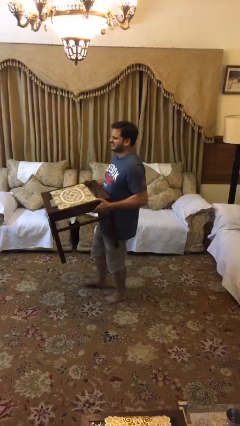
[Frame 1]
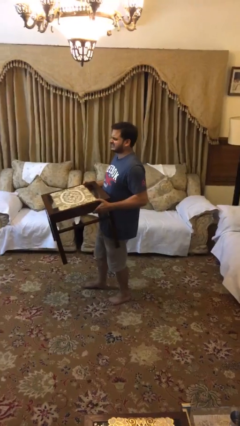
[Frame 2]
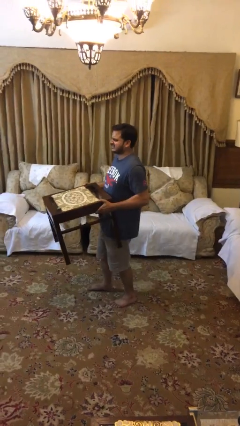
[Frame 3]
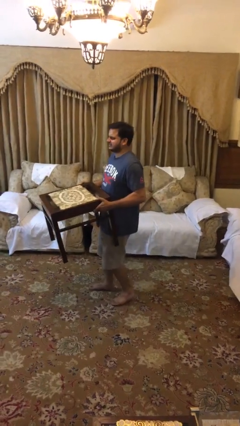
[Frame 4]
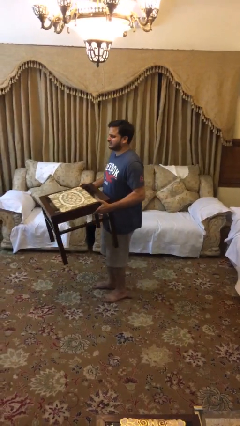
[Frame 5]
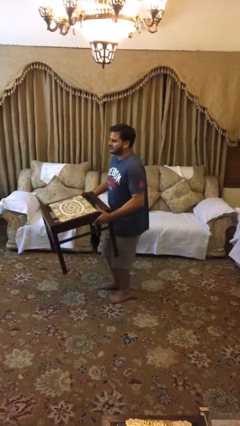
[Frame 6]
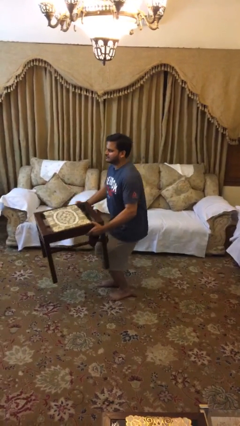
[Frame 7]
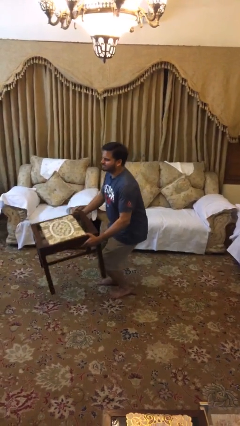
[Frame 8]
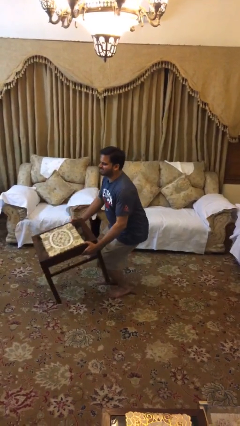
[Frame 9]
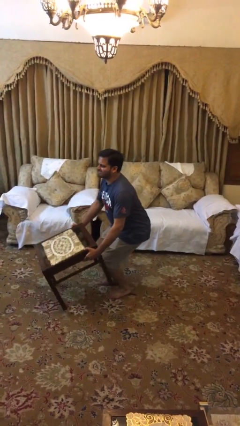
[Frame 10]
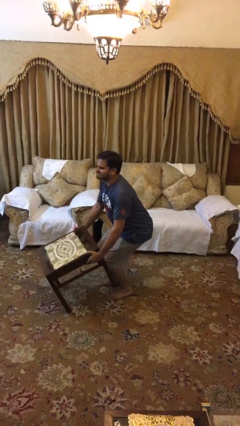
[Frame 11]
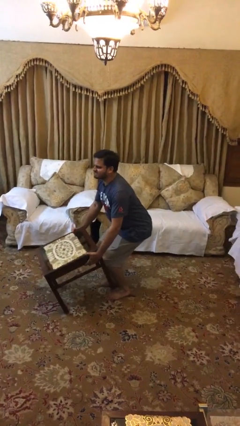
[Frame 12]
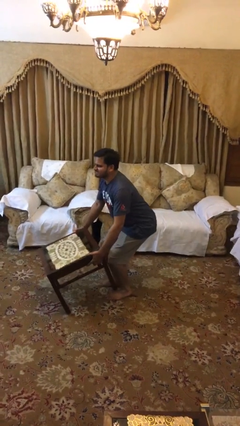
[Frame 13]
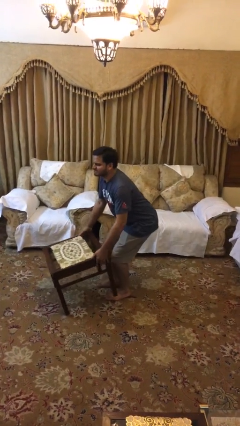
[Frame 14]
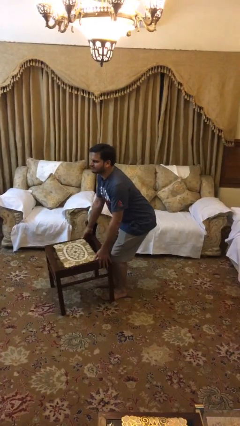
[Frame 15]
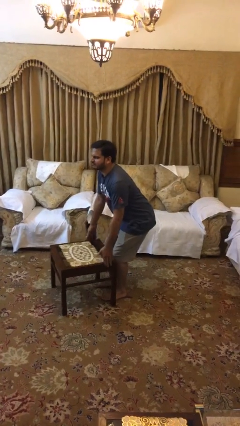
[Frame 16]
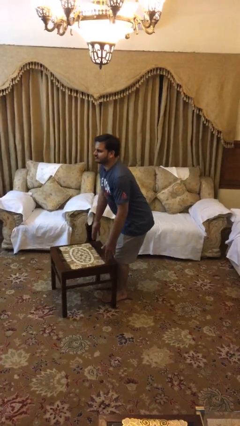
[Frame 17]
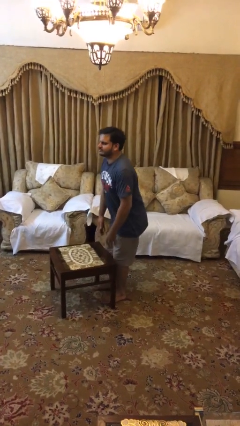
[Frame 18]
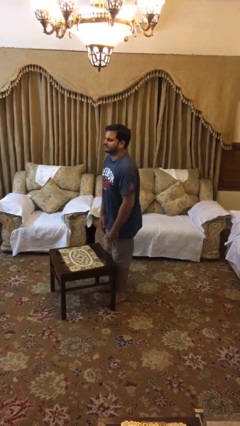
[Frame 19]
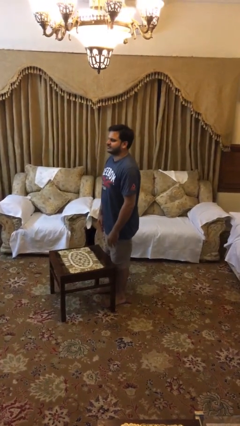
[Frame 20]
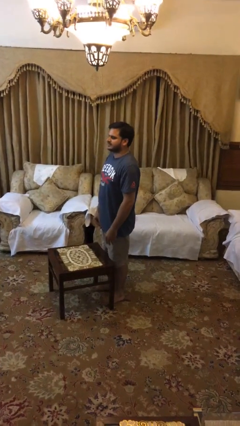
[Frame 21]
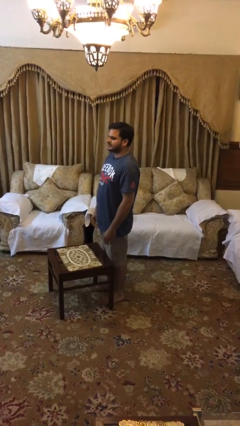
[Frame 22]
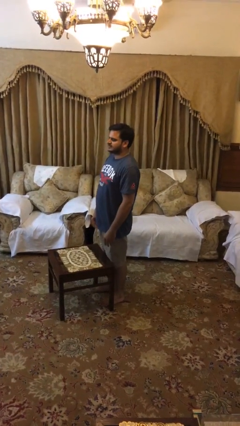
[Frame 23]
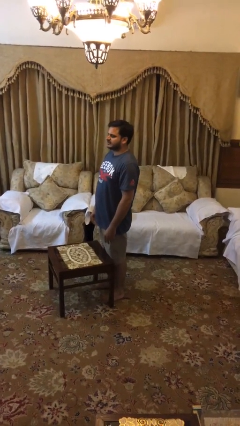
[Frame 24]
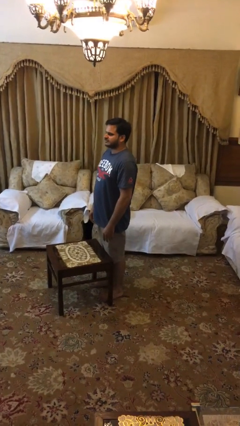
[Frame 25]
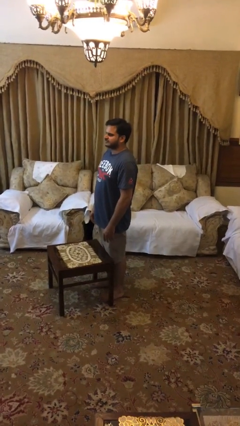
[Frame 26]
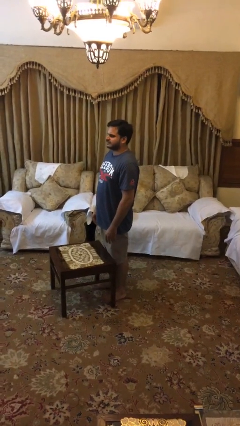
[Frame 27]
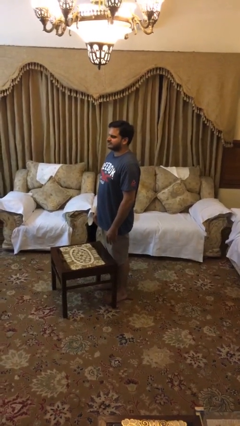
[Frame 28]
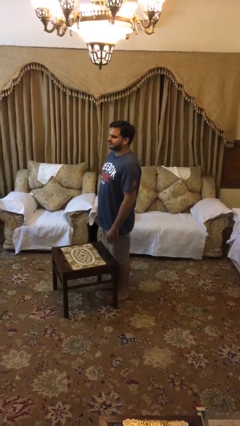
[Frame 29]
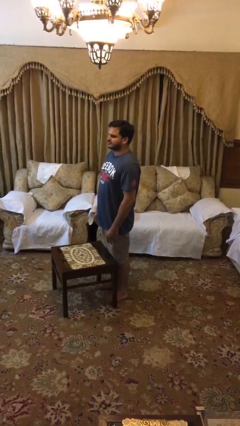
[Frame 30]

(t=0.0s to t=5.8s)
person puts down object on floor

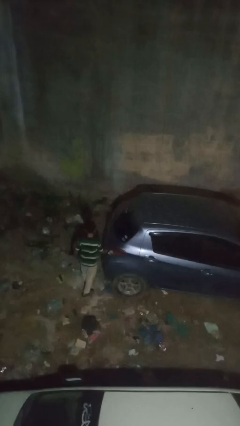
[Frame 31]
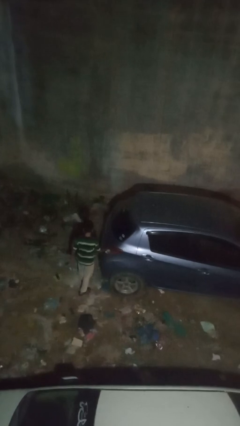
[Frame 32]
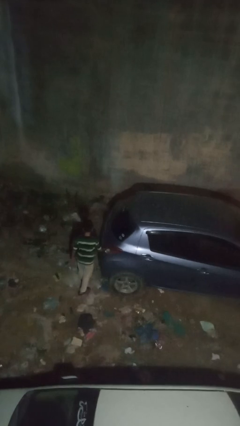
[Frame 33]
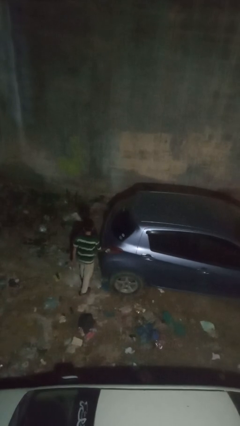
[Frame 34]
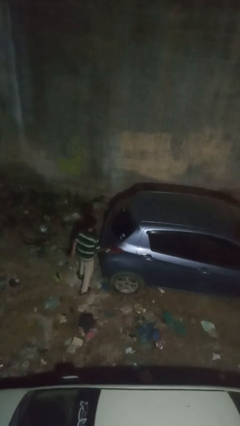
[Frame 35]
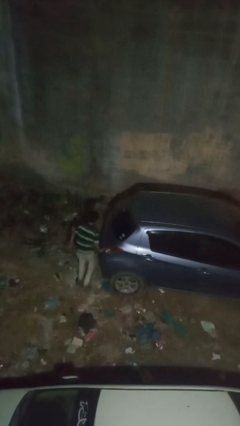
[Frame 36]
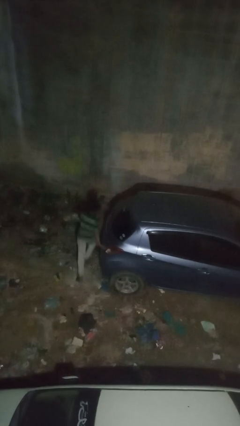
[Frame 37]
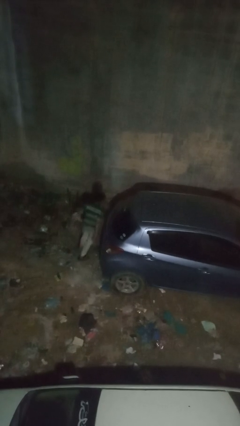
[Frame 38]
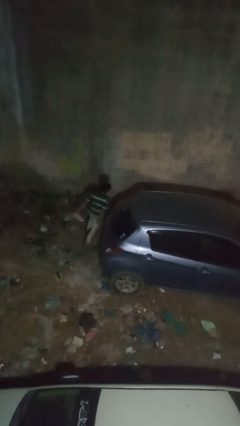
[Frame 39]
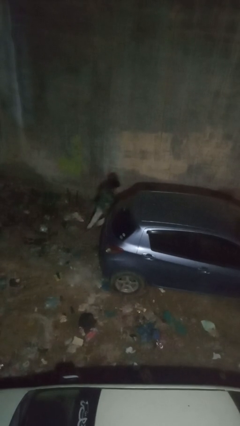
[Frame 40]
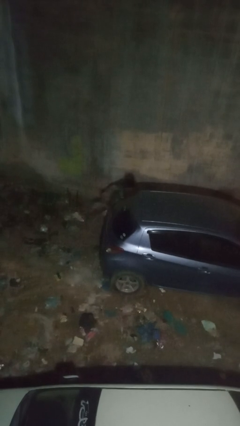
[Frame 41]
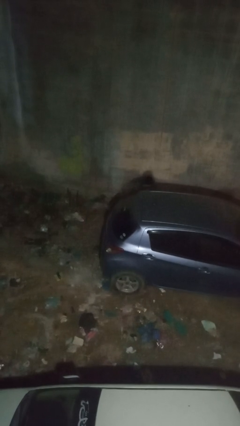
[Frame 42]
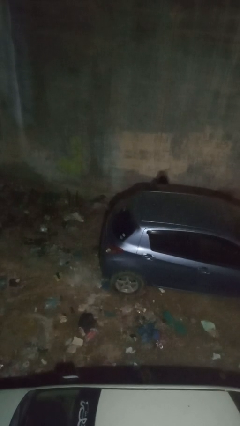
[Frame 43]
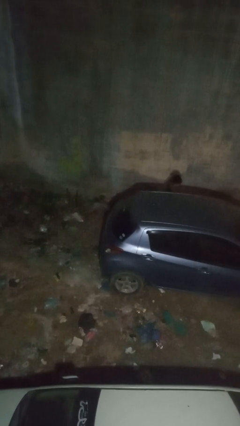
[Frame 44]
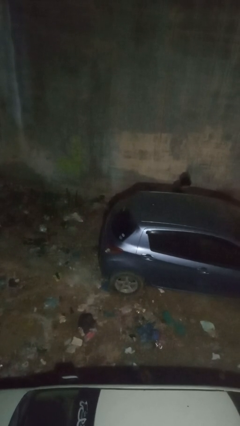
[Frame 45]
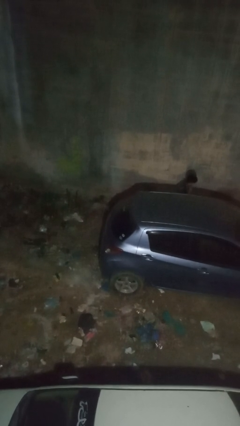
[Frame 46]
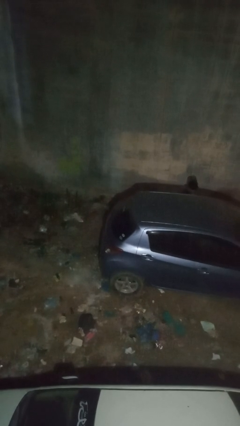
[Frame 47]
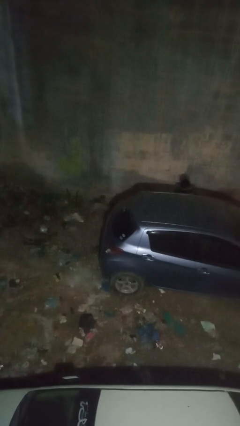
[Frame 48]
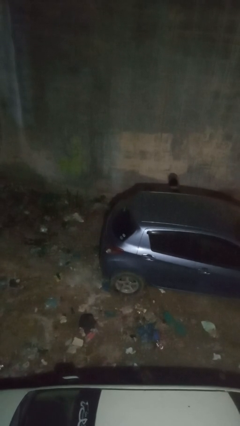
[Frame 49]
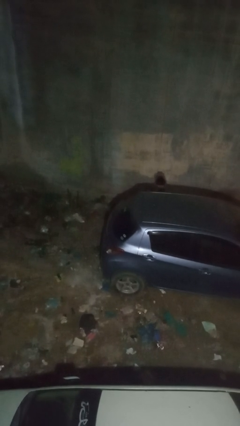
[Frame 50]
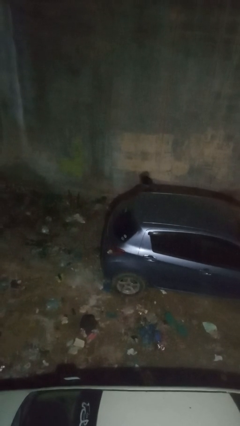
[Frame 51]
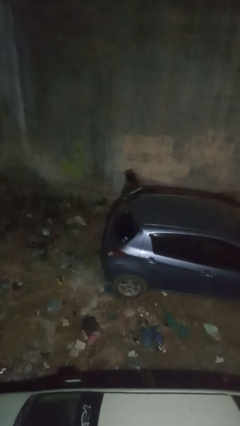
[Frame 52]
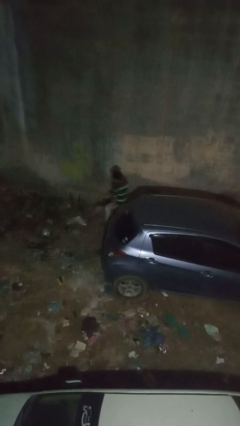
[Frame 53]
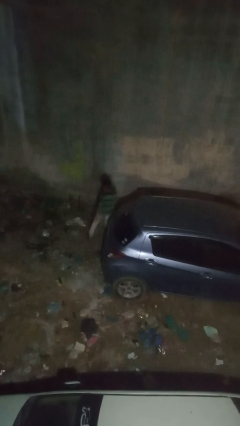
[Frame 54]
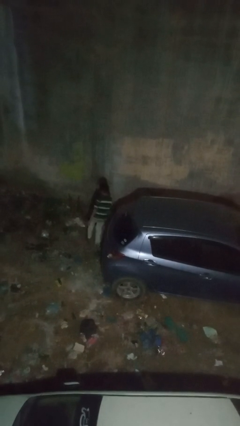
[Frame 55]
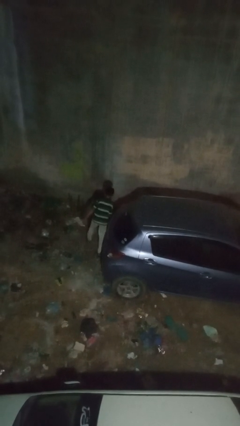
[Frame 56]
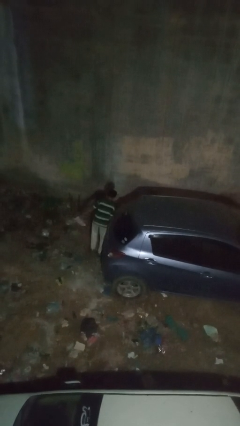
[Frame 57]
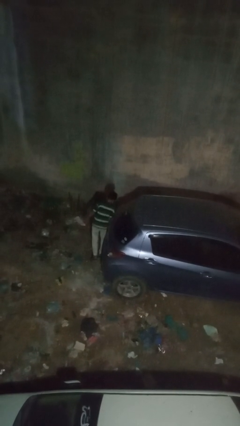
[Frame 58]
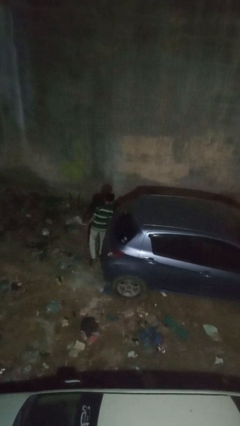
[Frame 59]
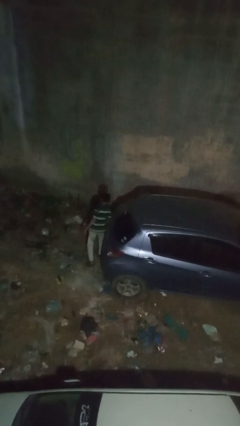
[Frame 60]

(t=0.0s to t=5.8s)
person walks around car

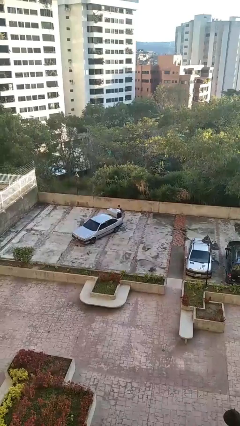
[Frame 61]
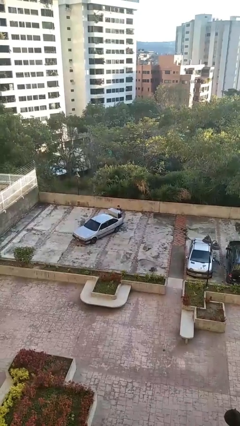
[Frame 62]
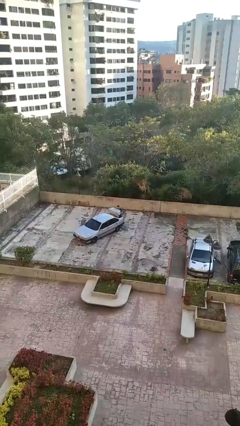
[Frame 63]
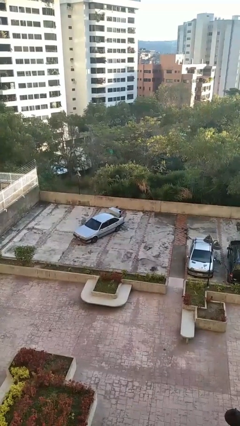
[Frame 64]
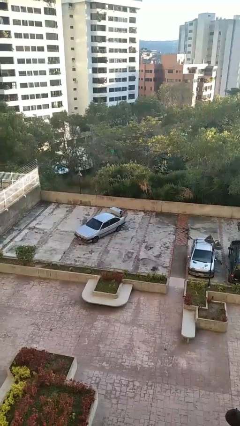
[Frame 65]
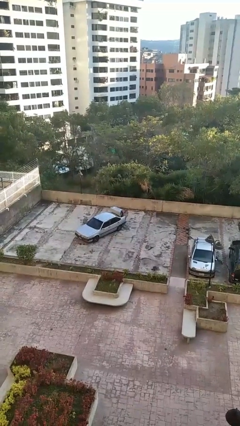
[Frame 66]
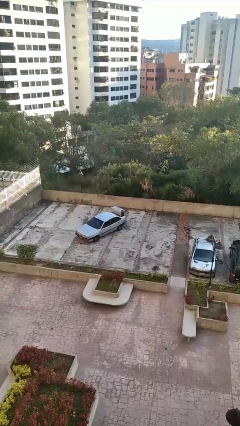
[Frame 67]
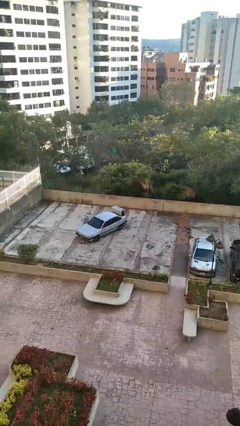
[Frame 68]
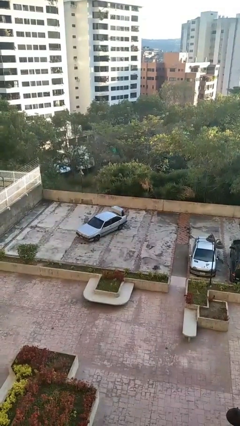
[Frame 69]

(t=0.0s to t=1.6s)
person loads car

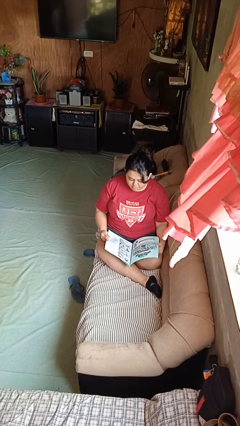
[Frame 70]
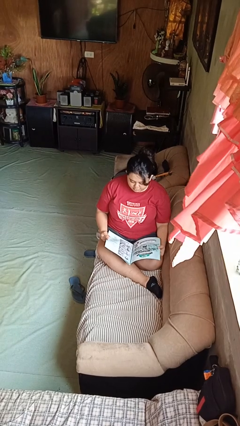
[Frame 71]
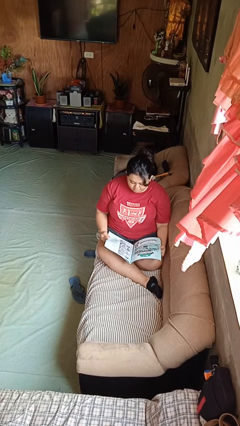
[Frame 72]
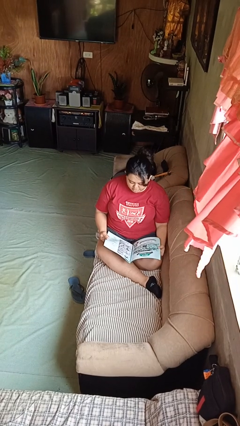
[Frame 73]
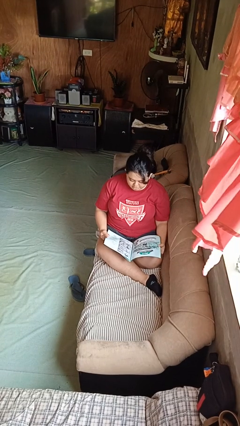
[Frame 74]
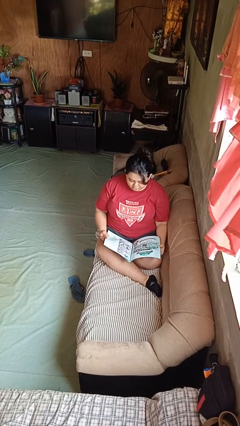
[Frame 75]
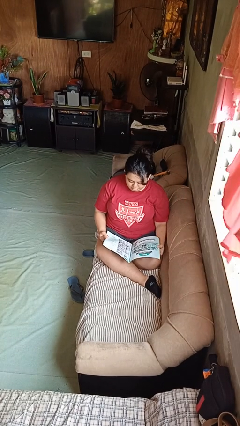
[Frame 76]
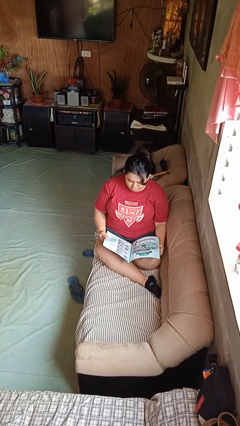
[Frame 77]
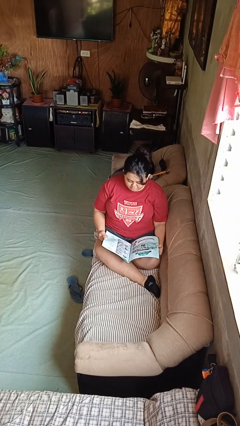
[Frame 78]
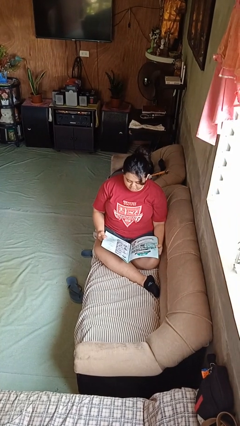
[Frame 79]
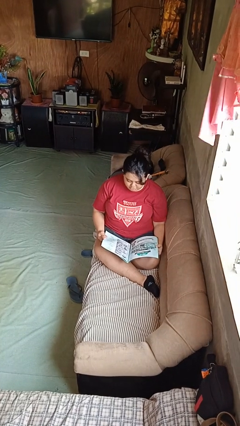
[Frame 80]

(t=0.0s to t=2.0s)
person reads magazine

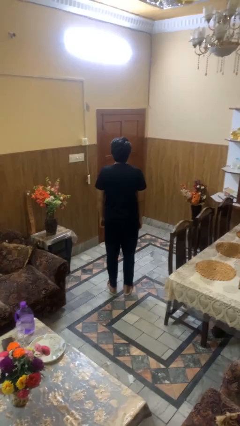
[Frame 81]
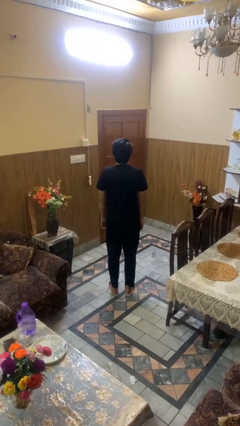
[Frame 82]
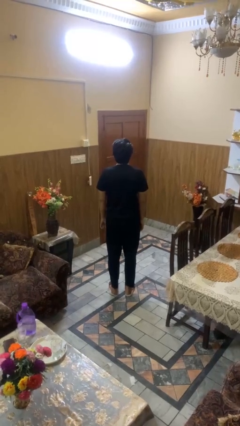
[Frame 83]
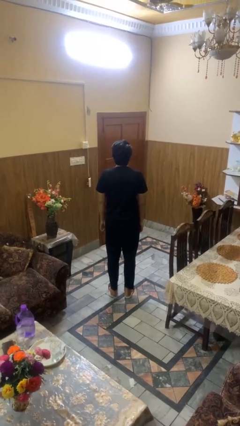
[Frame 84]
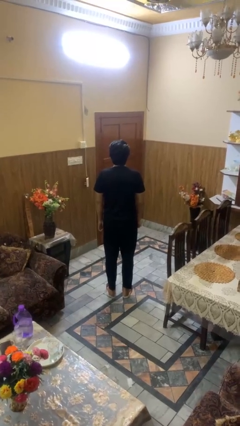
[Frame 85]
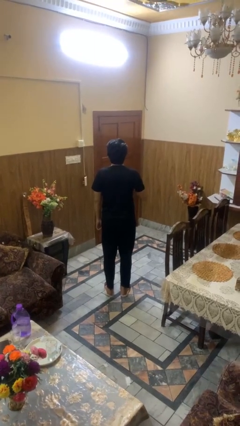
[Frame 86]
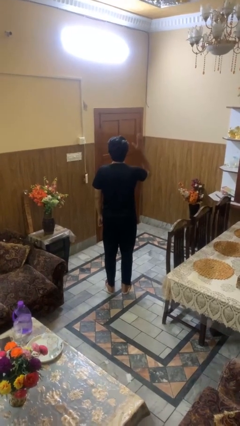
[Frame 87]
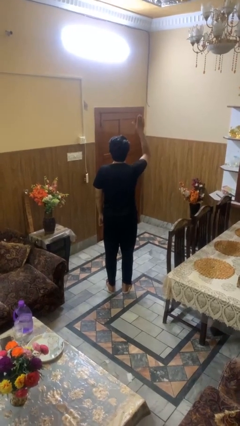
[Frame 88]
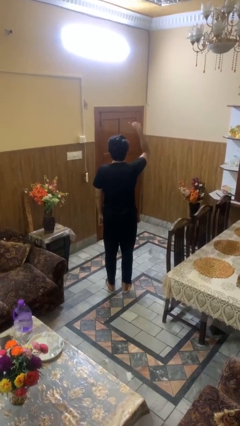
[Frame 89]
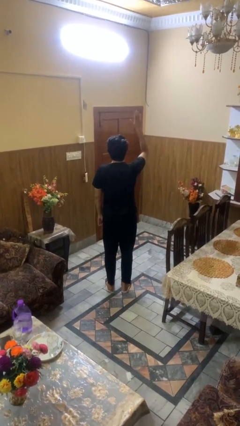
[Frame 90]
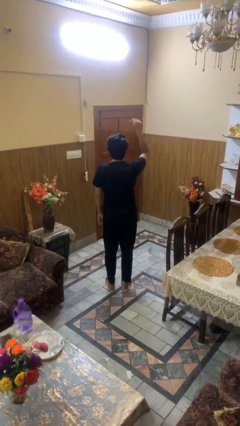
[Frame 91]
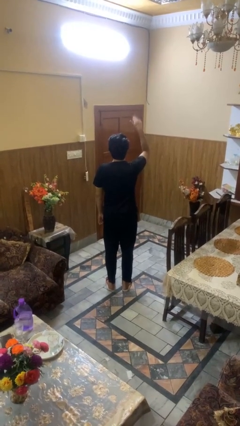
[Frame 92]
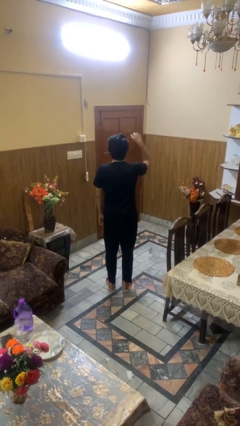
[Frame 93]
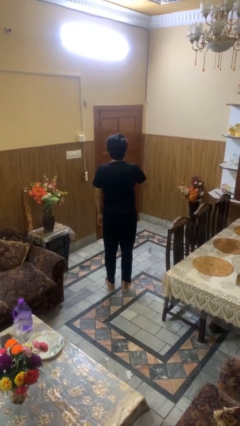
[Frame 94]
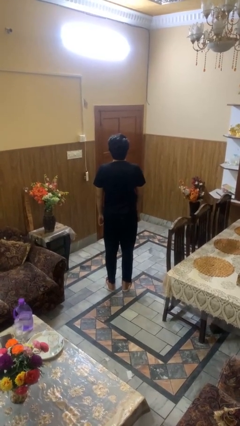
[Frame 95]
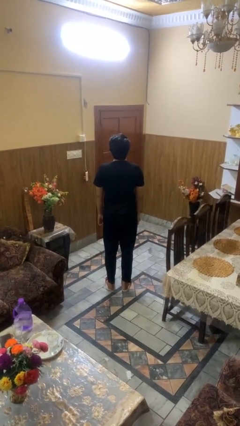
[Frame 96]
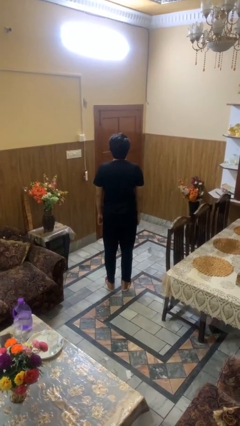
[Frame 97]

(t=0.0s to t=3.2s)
person gestures come here
